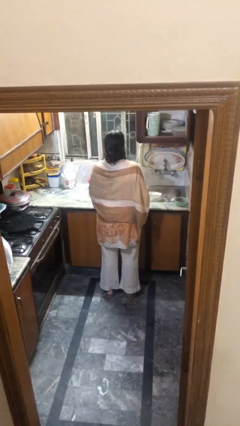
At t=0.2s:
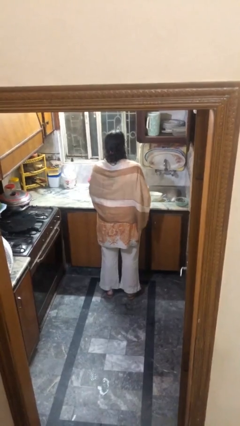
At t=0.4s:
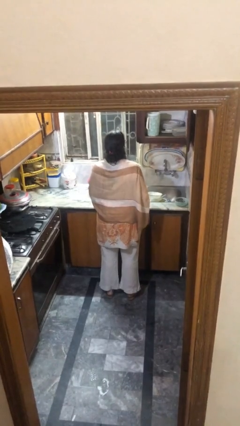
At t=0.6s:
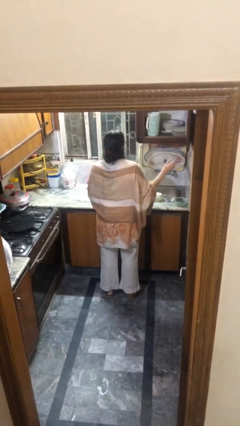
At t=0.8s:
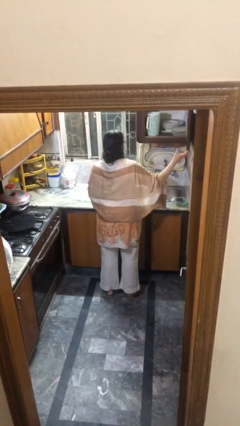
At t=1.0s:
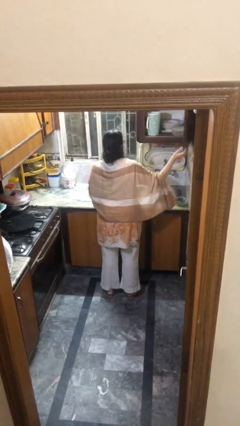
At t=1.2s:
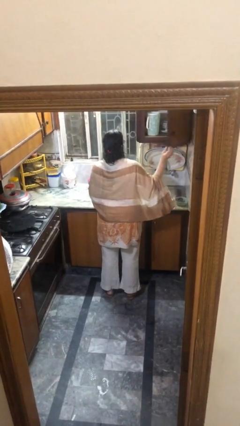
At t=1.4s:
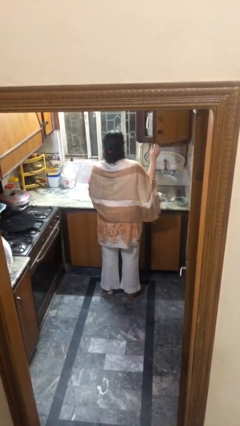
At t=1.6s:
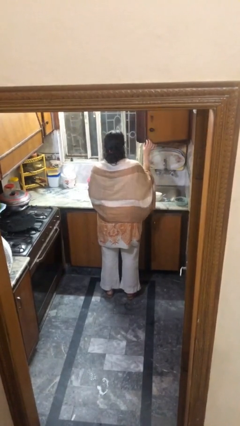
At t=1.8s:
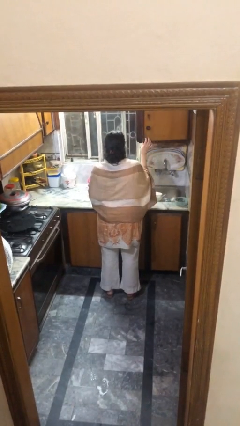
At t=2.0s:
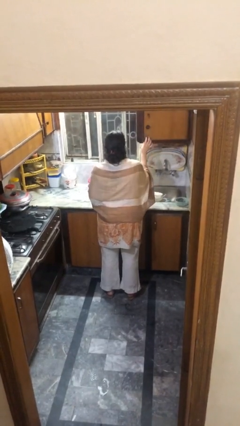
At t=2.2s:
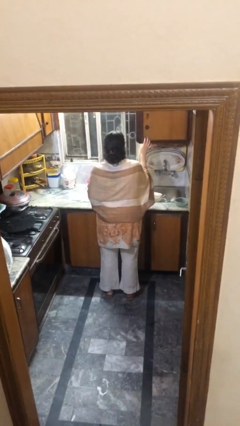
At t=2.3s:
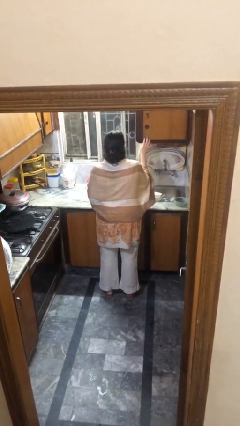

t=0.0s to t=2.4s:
person closes kitchen drawer

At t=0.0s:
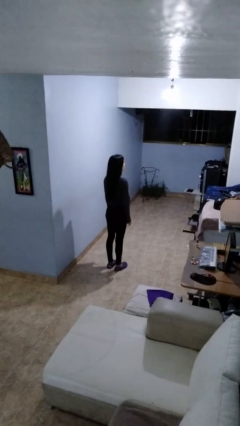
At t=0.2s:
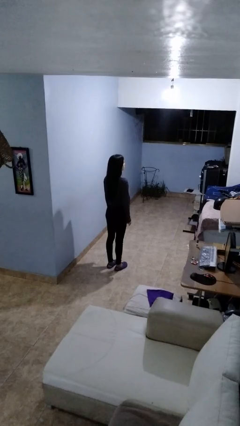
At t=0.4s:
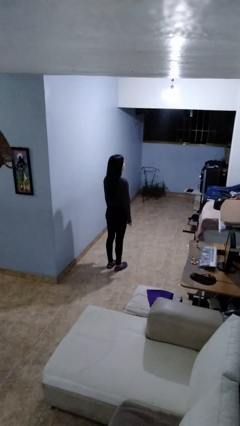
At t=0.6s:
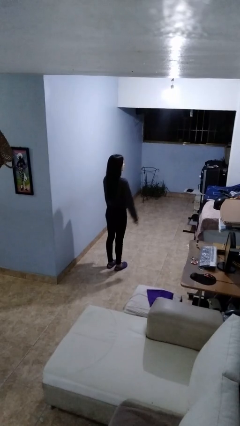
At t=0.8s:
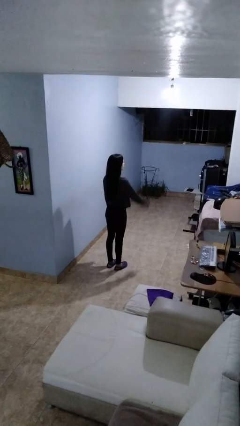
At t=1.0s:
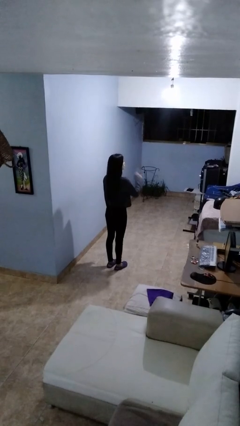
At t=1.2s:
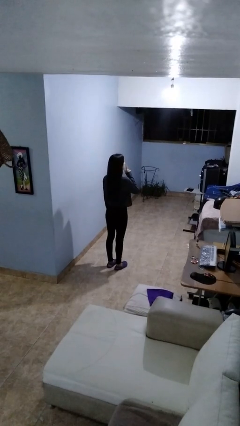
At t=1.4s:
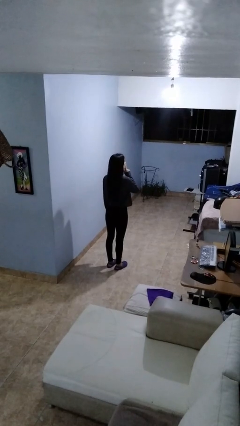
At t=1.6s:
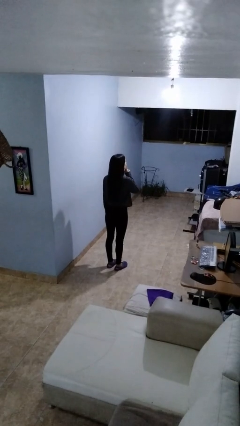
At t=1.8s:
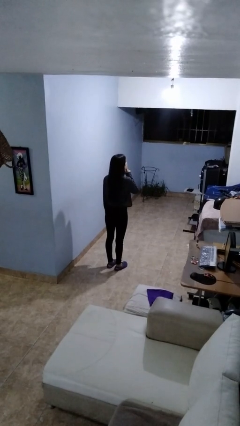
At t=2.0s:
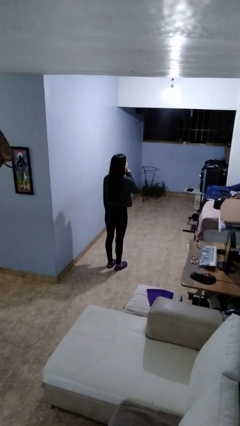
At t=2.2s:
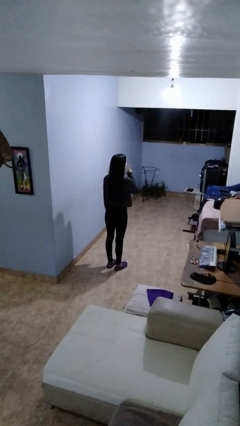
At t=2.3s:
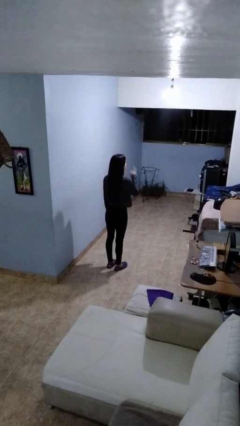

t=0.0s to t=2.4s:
person gestures be quiet

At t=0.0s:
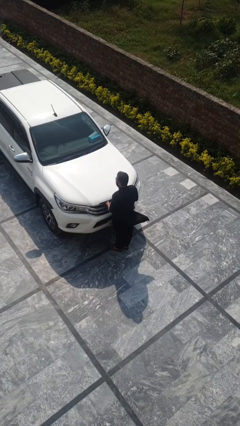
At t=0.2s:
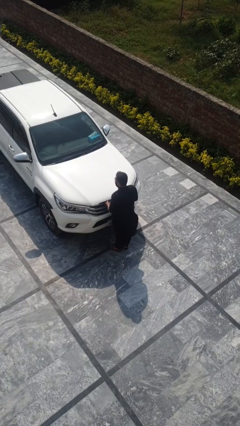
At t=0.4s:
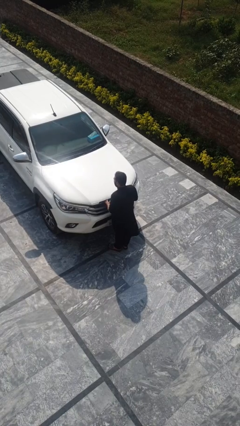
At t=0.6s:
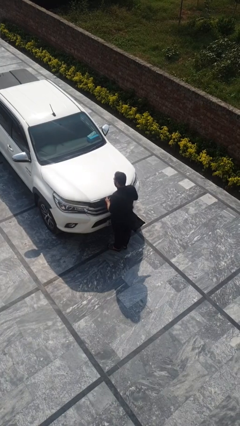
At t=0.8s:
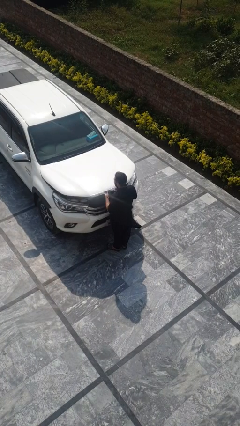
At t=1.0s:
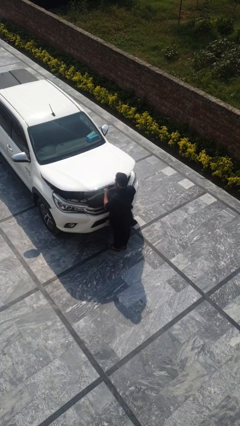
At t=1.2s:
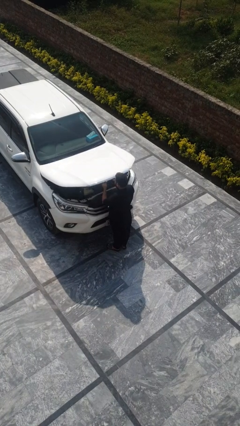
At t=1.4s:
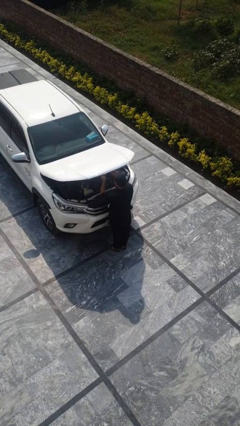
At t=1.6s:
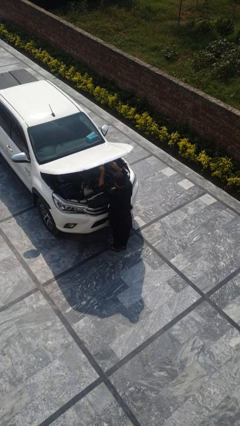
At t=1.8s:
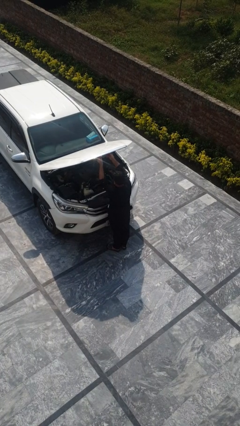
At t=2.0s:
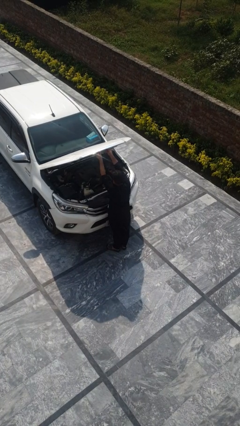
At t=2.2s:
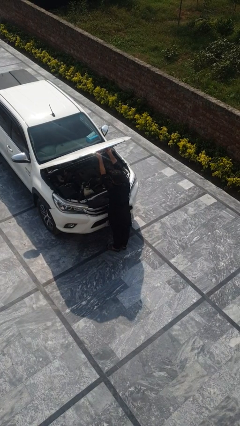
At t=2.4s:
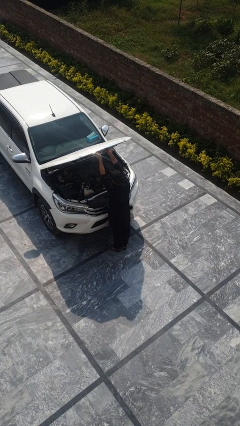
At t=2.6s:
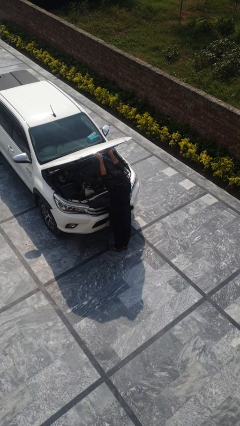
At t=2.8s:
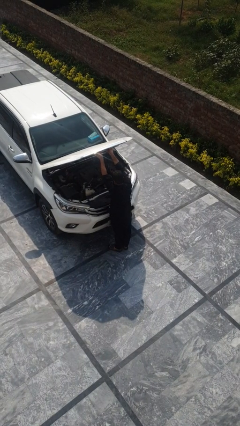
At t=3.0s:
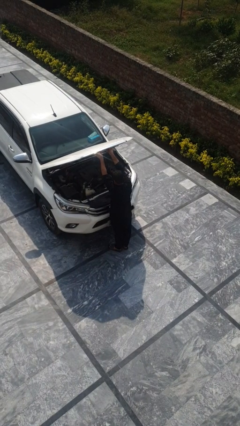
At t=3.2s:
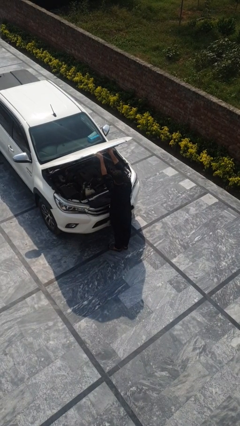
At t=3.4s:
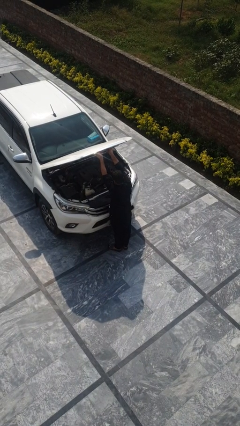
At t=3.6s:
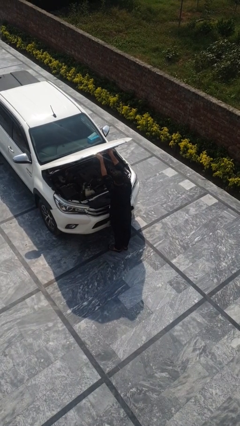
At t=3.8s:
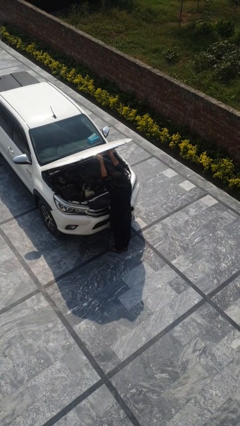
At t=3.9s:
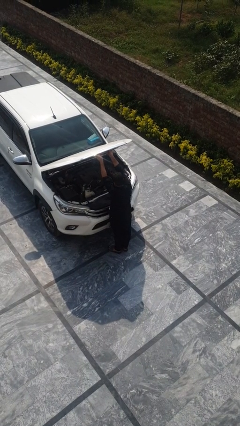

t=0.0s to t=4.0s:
person opens car hood

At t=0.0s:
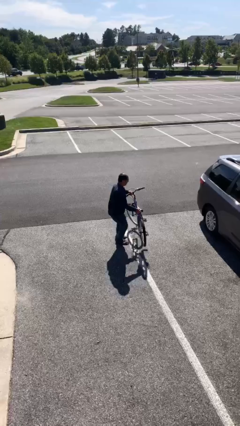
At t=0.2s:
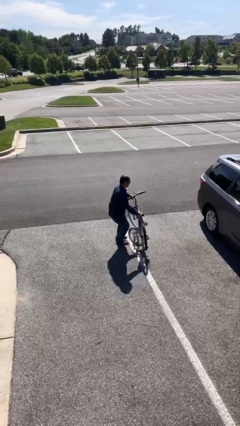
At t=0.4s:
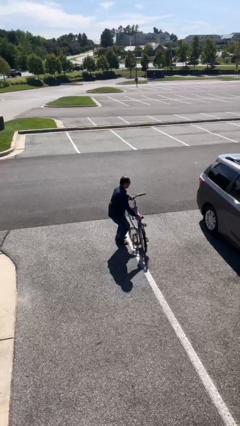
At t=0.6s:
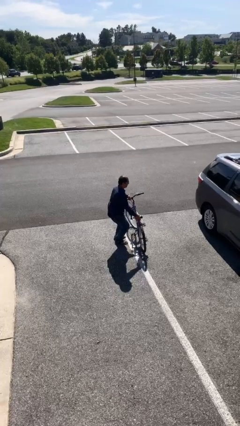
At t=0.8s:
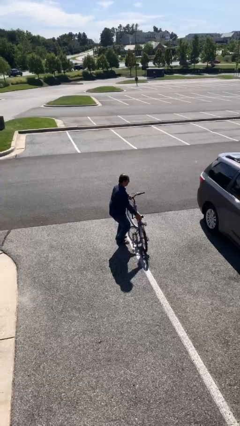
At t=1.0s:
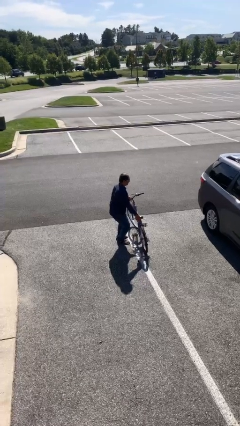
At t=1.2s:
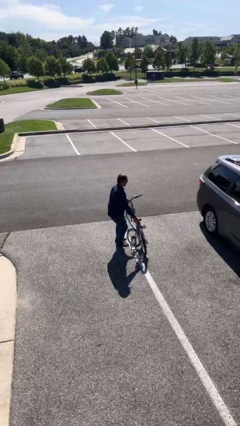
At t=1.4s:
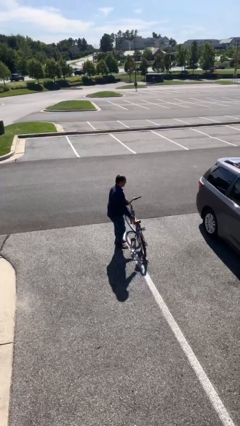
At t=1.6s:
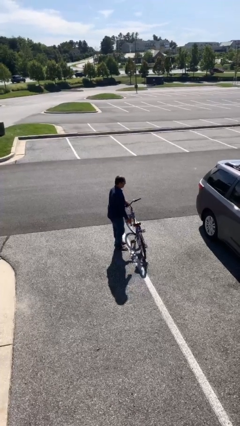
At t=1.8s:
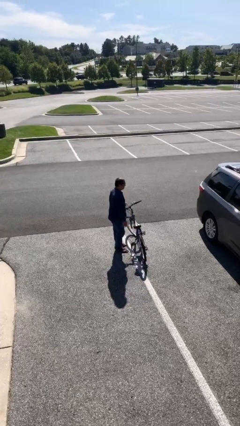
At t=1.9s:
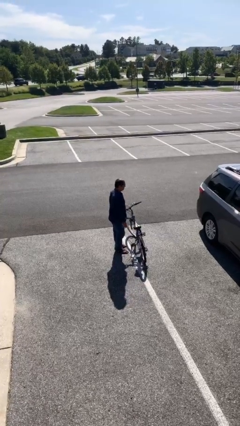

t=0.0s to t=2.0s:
person puts down object on floor

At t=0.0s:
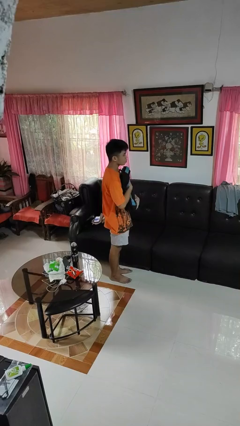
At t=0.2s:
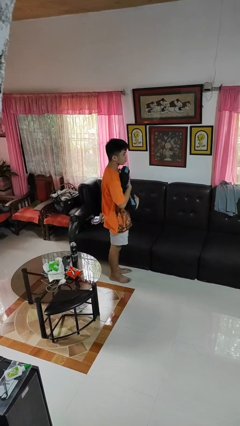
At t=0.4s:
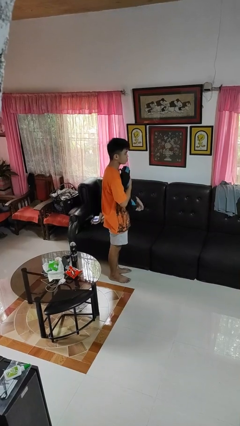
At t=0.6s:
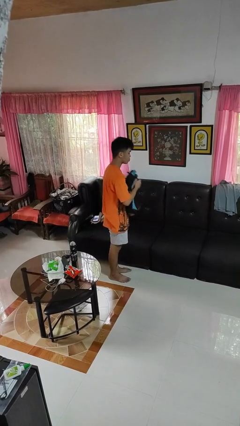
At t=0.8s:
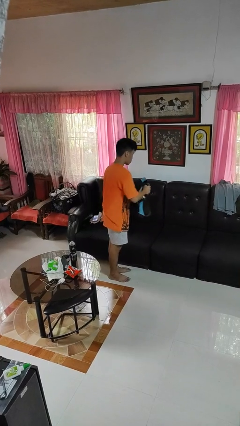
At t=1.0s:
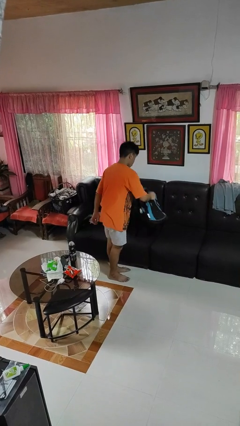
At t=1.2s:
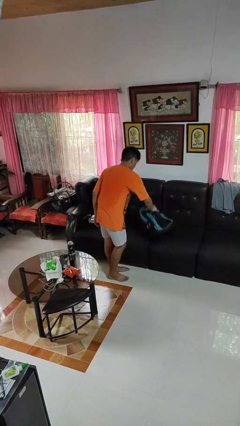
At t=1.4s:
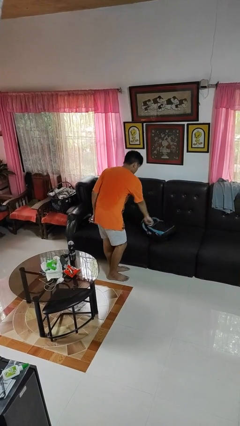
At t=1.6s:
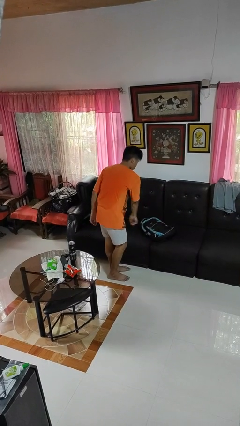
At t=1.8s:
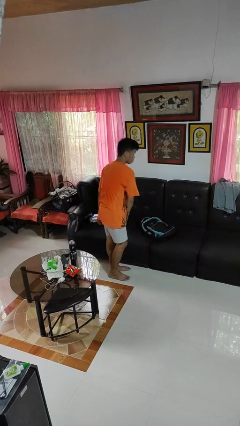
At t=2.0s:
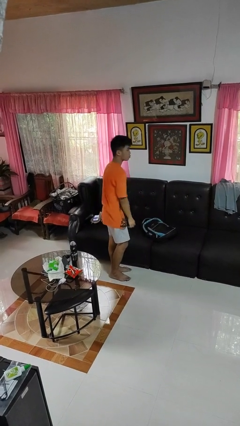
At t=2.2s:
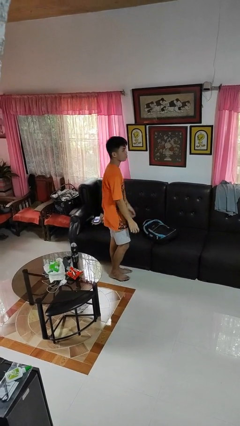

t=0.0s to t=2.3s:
person puts down object on couch

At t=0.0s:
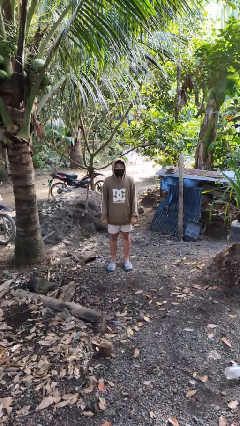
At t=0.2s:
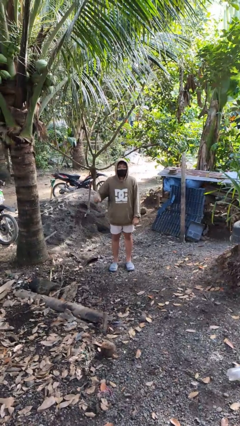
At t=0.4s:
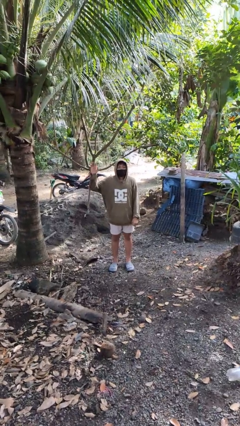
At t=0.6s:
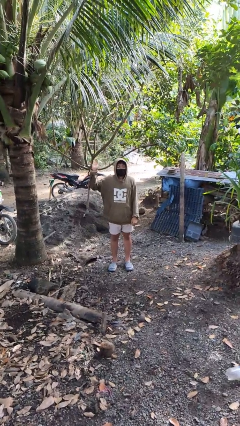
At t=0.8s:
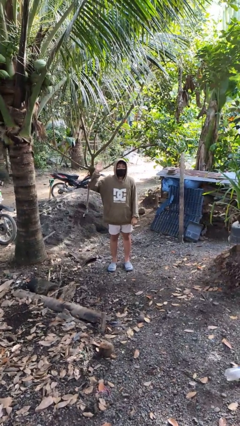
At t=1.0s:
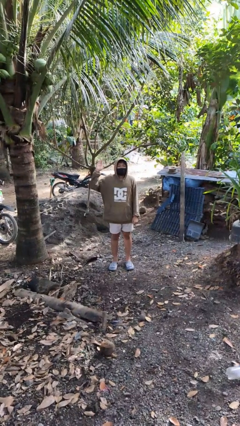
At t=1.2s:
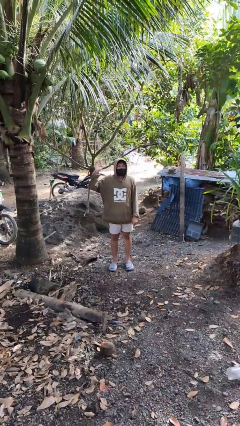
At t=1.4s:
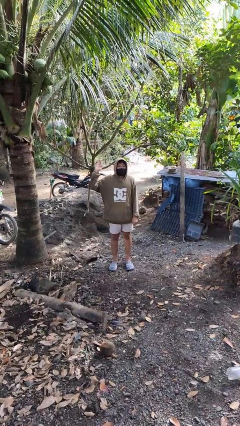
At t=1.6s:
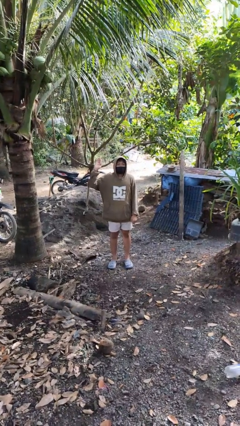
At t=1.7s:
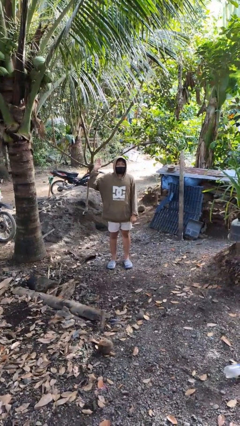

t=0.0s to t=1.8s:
person gestures number five

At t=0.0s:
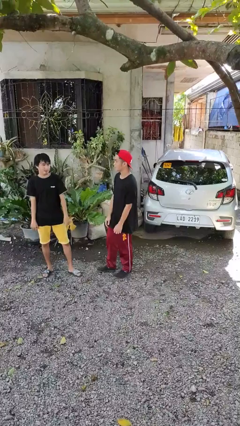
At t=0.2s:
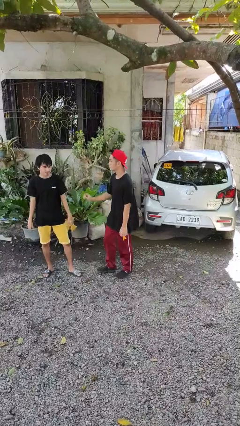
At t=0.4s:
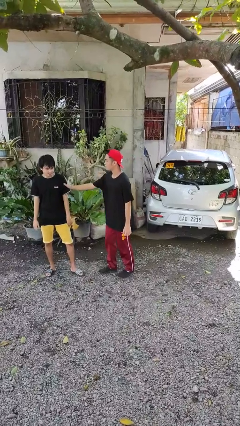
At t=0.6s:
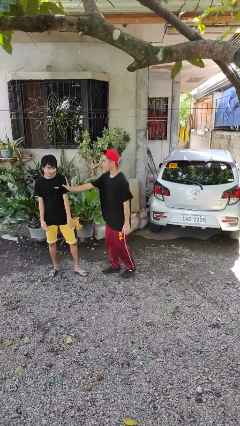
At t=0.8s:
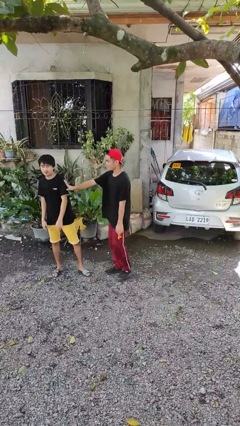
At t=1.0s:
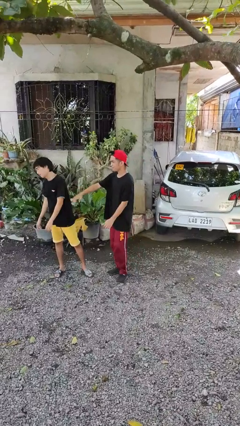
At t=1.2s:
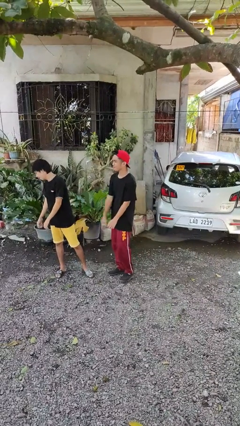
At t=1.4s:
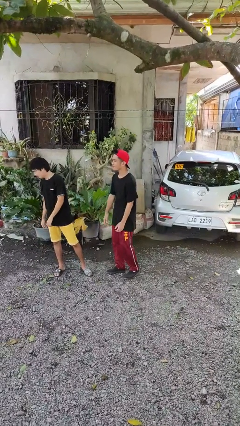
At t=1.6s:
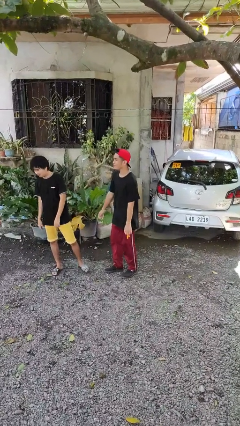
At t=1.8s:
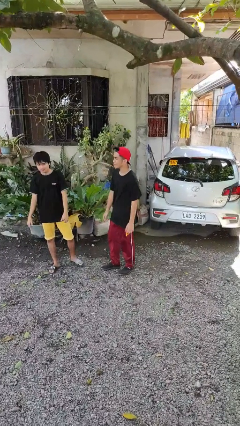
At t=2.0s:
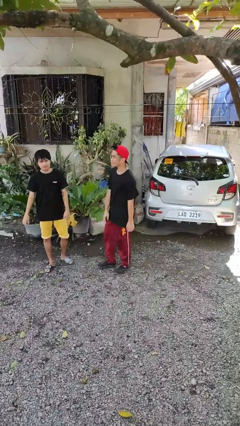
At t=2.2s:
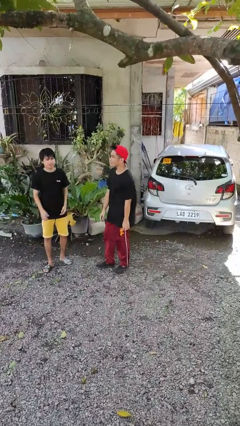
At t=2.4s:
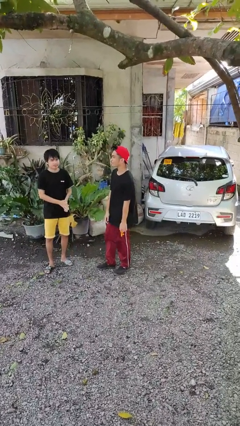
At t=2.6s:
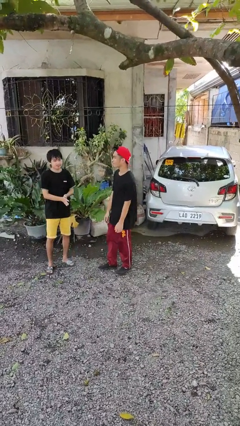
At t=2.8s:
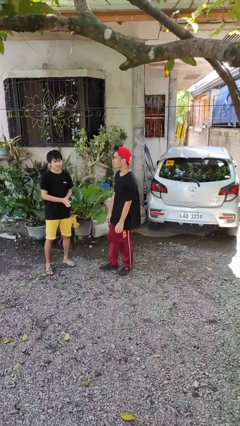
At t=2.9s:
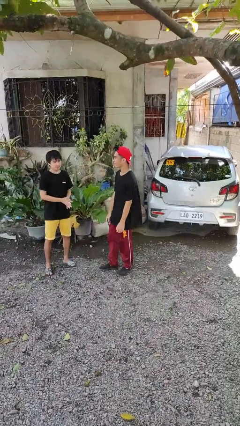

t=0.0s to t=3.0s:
person shoves person
